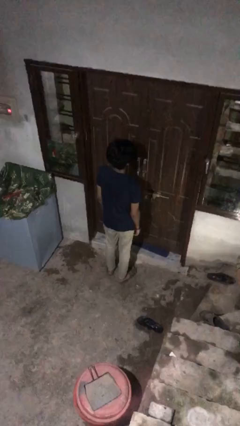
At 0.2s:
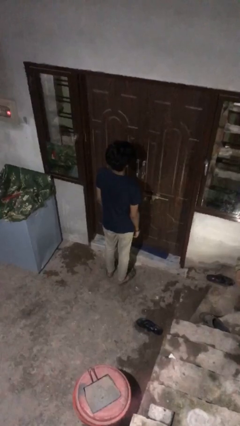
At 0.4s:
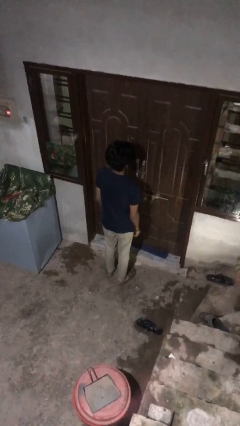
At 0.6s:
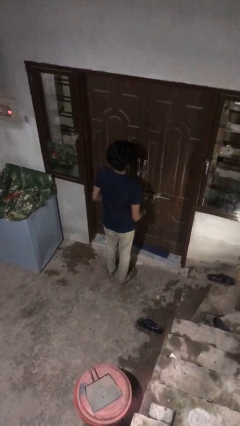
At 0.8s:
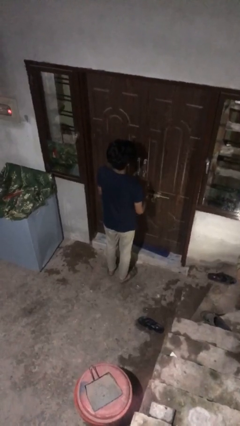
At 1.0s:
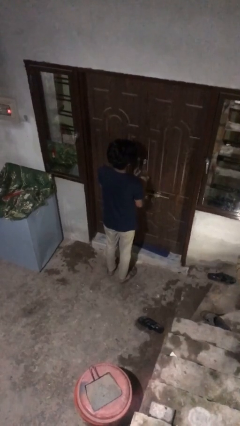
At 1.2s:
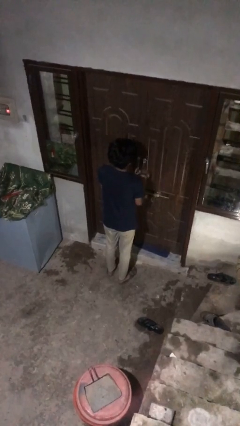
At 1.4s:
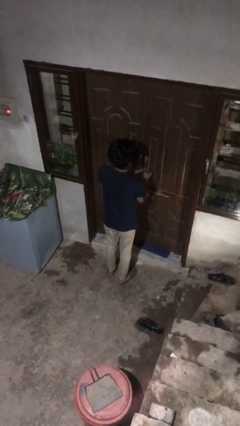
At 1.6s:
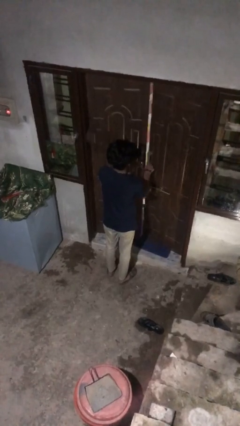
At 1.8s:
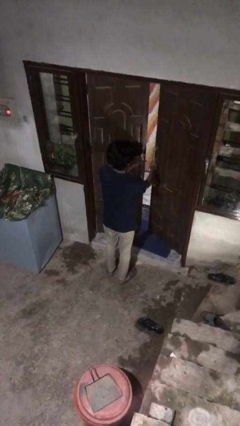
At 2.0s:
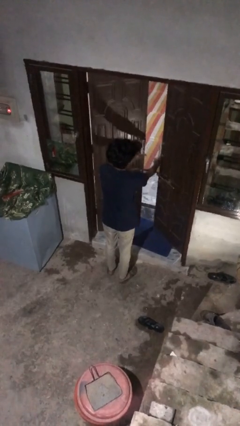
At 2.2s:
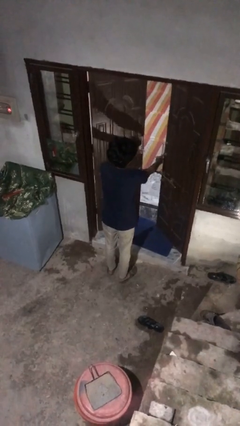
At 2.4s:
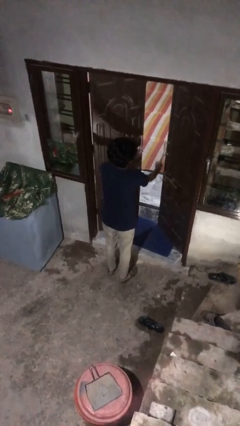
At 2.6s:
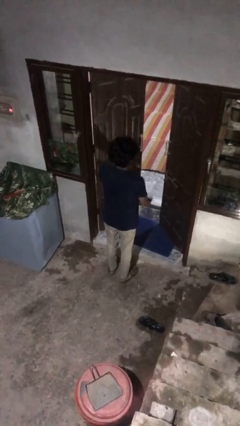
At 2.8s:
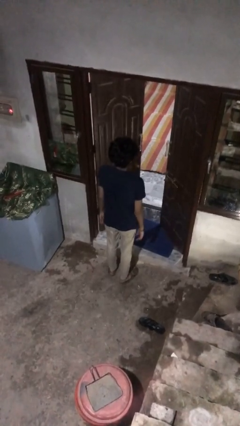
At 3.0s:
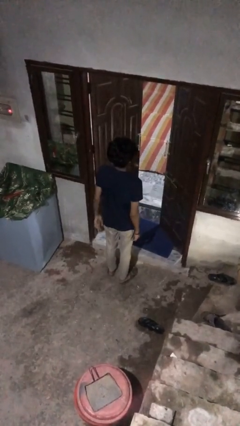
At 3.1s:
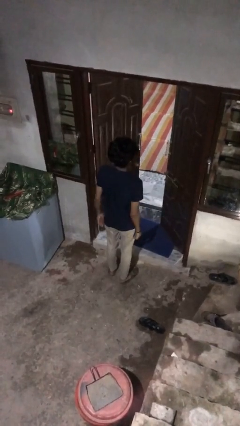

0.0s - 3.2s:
person opens facility door

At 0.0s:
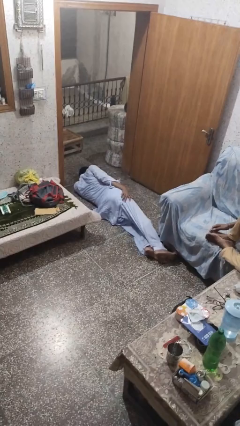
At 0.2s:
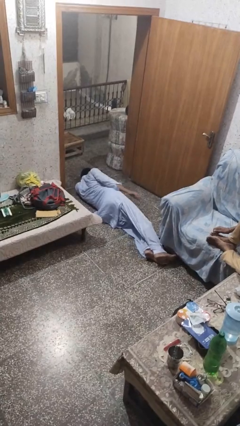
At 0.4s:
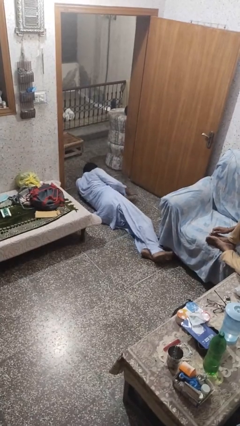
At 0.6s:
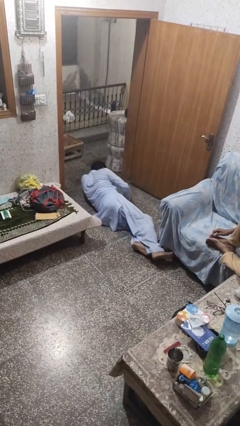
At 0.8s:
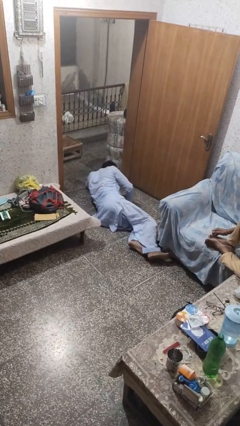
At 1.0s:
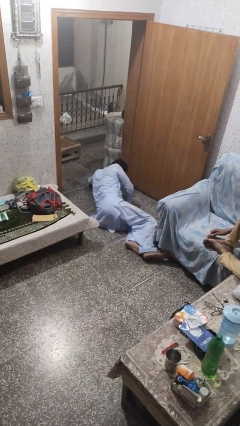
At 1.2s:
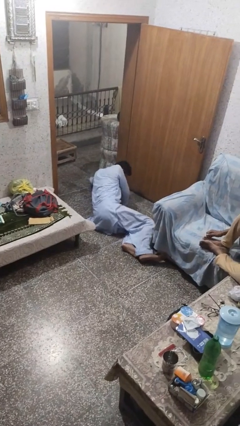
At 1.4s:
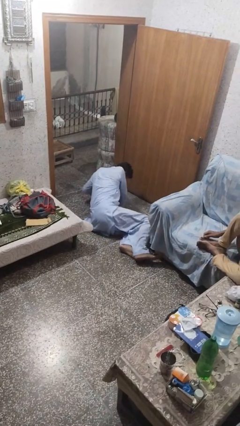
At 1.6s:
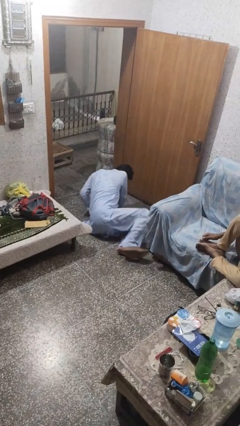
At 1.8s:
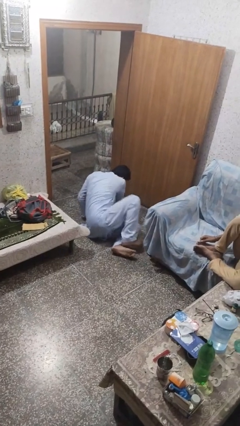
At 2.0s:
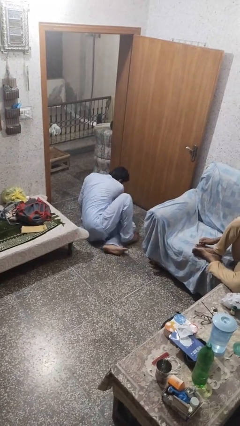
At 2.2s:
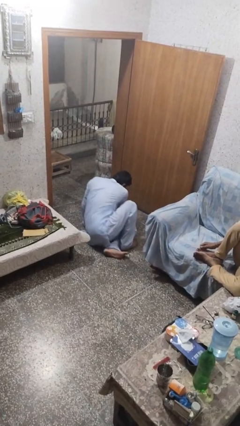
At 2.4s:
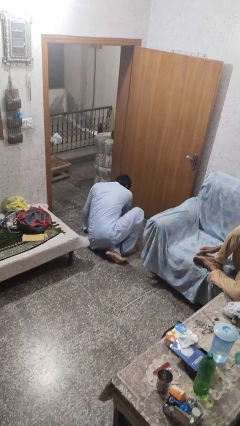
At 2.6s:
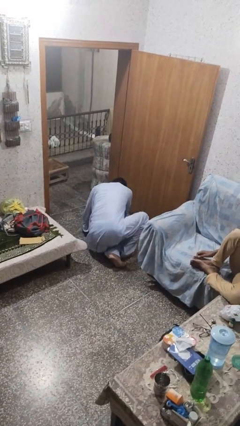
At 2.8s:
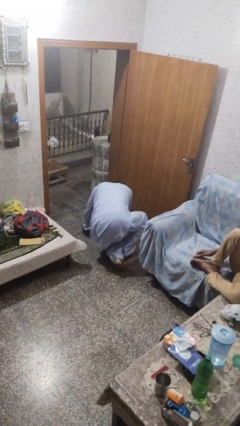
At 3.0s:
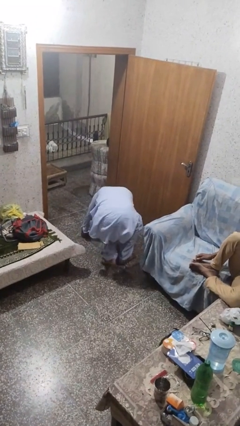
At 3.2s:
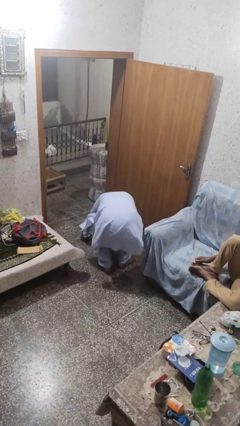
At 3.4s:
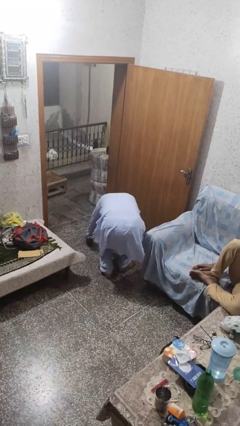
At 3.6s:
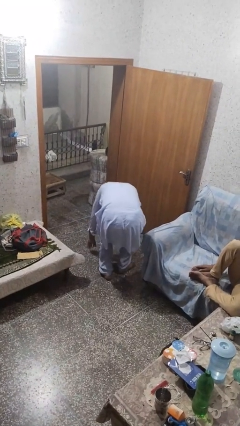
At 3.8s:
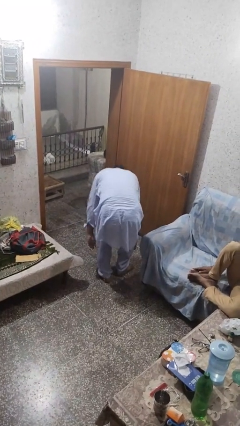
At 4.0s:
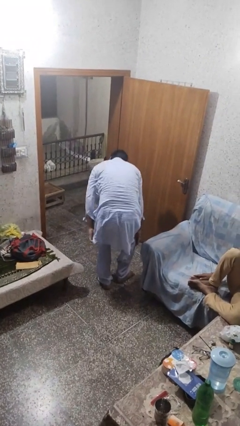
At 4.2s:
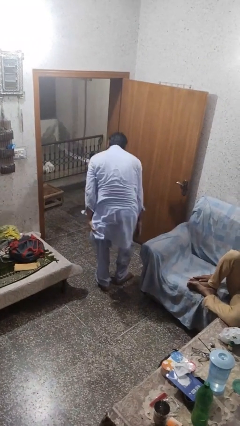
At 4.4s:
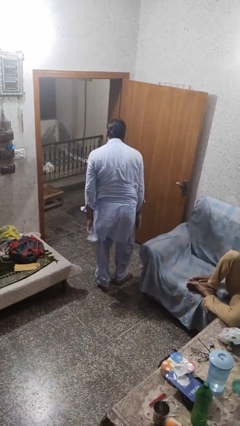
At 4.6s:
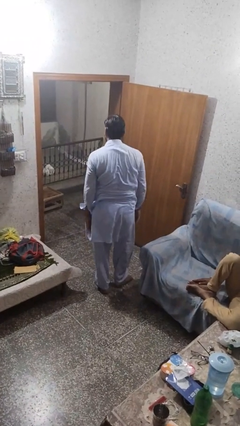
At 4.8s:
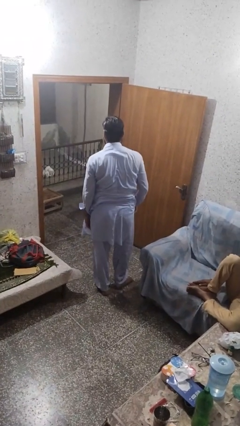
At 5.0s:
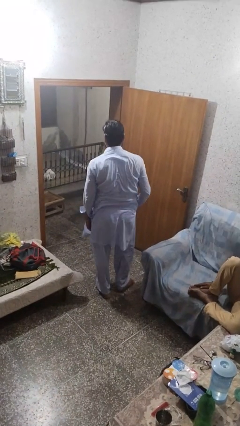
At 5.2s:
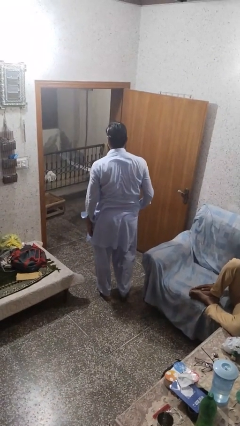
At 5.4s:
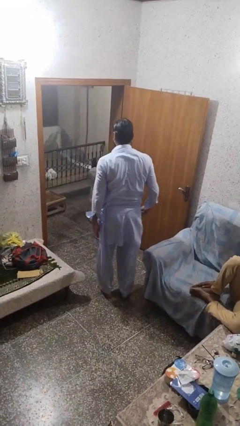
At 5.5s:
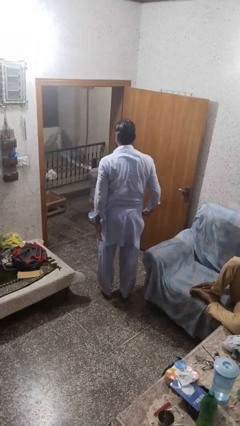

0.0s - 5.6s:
person stands up from floor

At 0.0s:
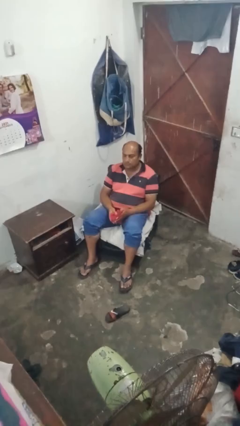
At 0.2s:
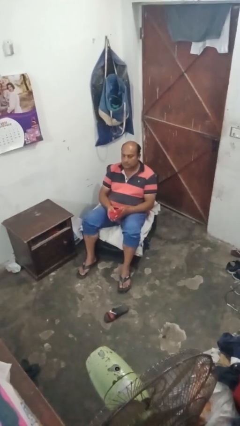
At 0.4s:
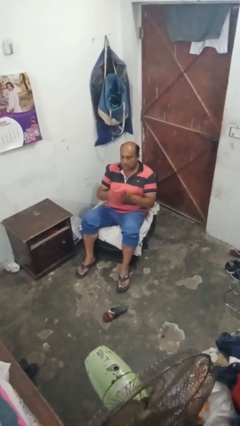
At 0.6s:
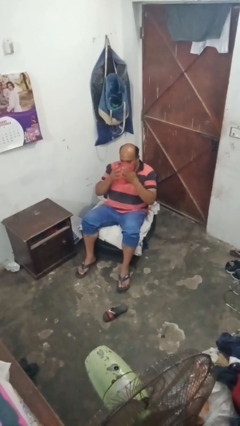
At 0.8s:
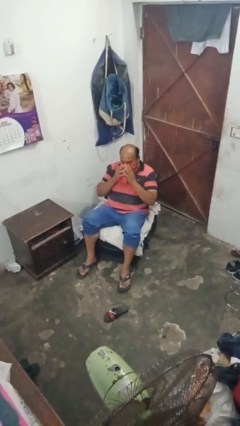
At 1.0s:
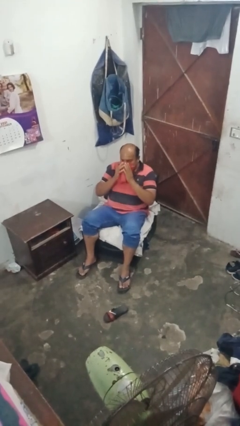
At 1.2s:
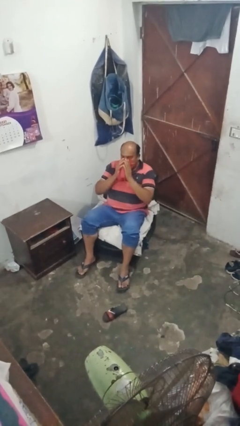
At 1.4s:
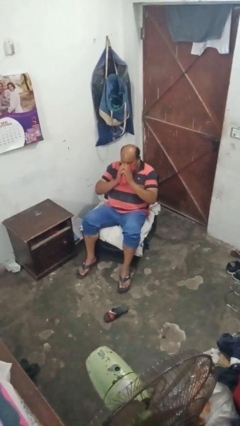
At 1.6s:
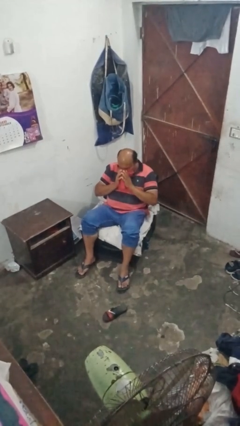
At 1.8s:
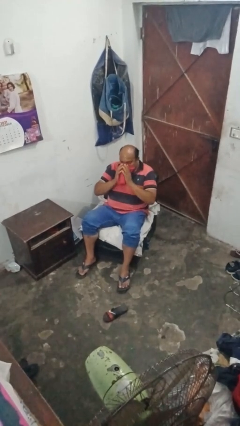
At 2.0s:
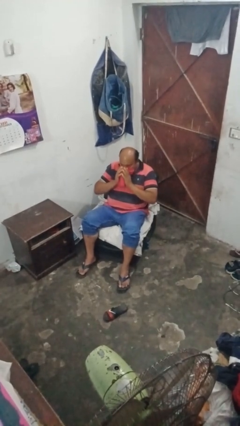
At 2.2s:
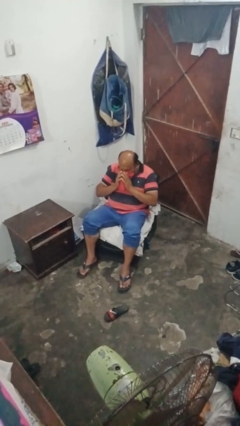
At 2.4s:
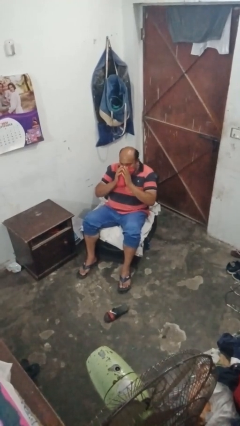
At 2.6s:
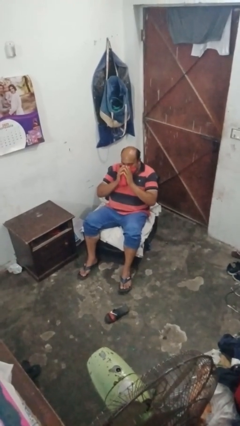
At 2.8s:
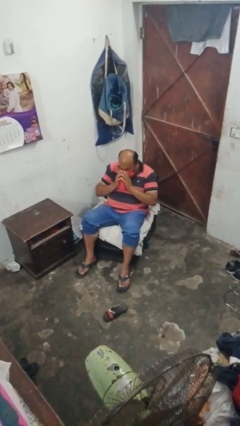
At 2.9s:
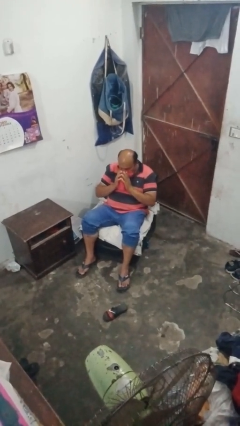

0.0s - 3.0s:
person blows nose

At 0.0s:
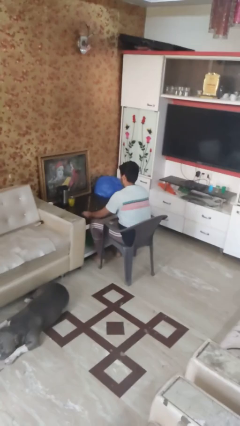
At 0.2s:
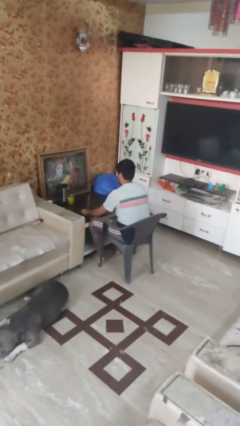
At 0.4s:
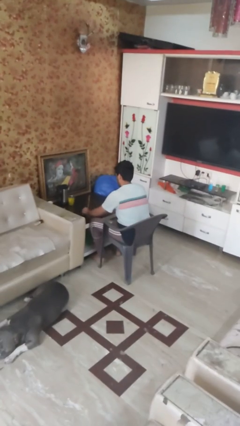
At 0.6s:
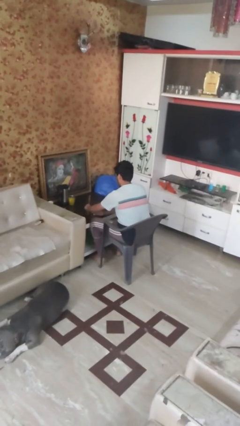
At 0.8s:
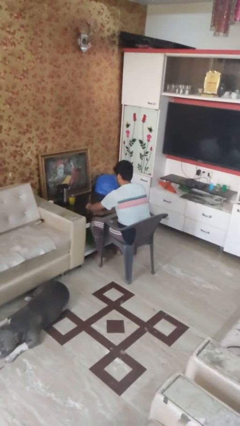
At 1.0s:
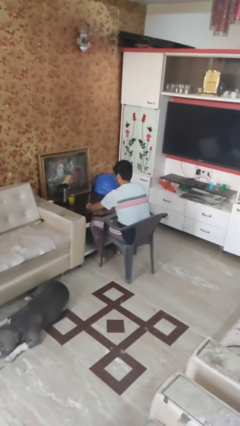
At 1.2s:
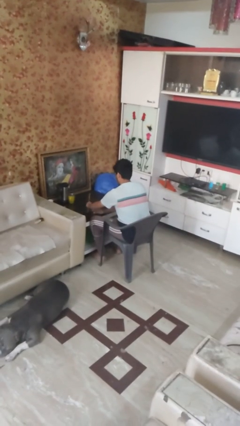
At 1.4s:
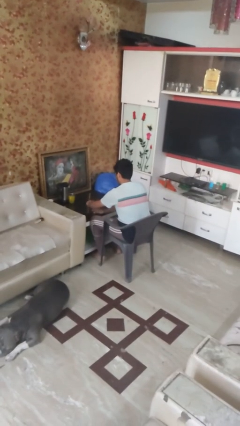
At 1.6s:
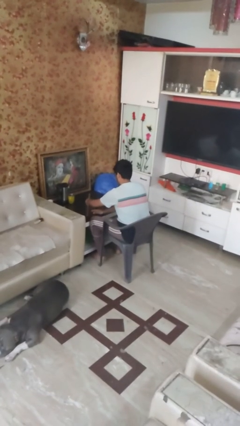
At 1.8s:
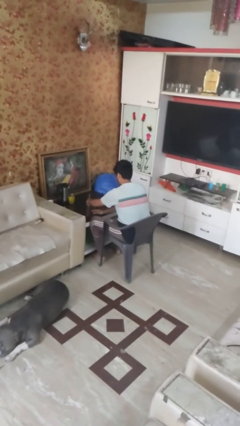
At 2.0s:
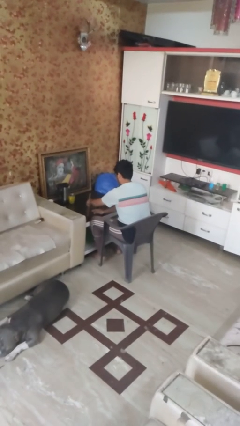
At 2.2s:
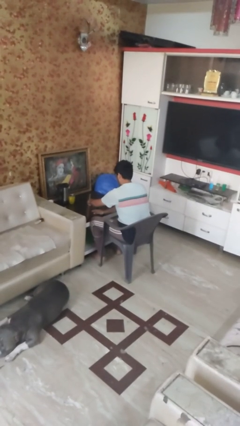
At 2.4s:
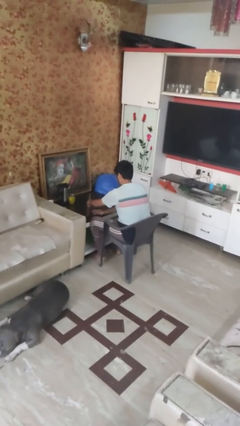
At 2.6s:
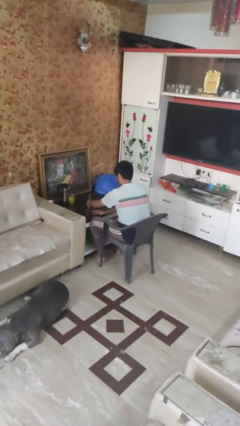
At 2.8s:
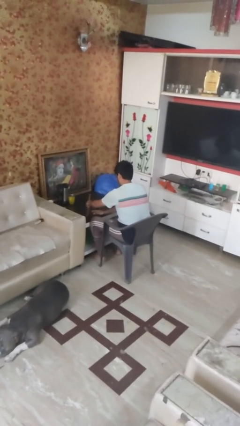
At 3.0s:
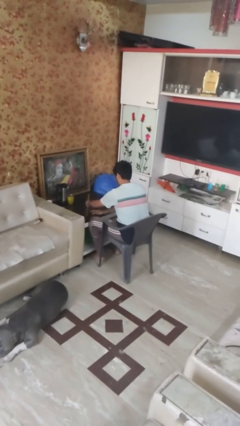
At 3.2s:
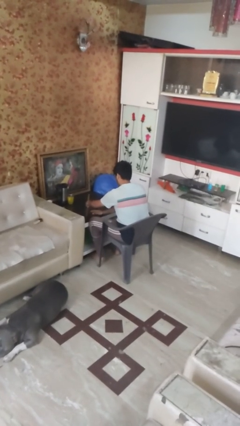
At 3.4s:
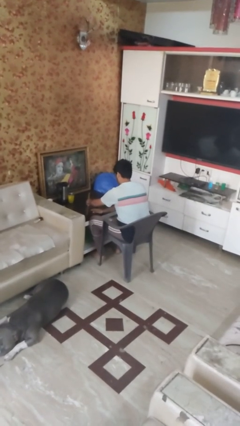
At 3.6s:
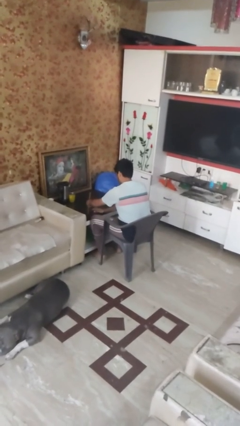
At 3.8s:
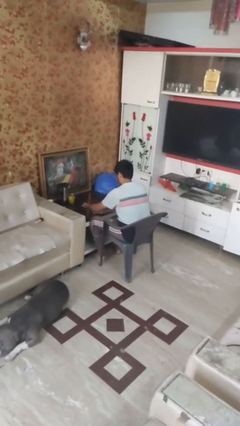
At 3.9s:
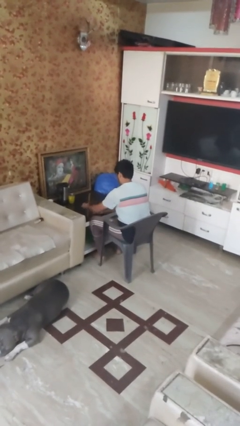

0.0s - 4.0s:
person paints fingernails

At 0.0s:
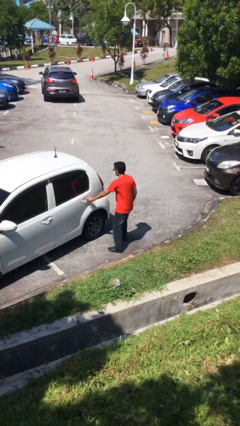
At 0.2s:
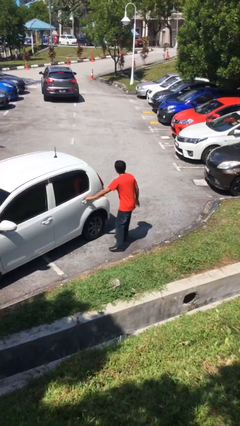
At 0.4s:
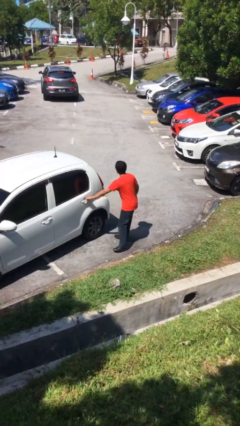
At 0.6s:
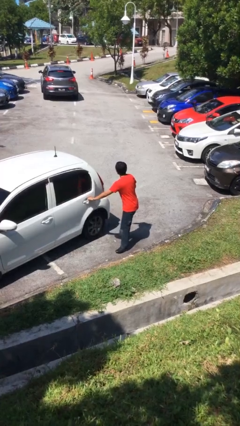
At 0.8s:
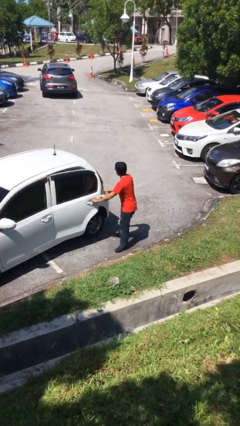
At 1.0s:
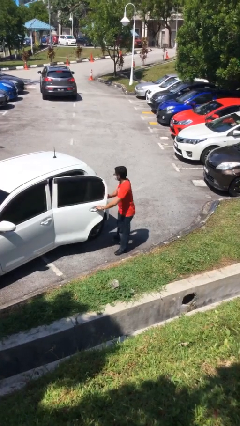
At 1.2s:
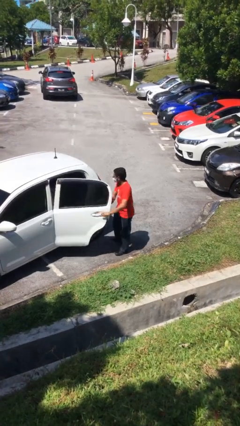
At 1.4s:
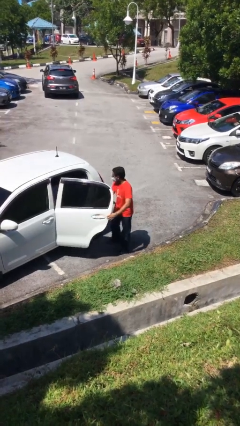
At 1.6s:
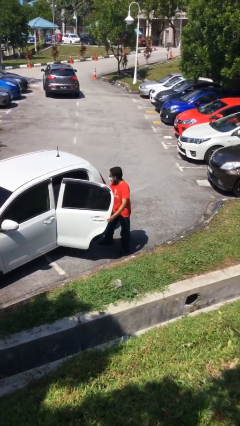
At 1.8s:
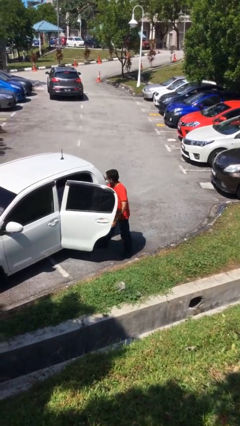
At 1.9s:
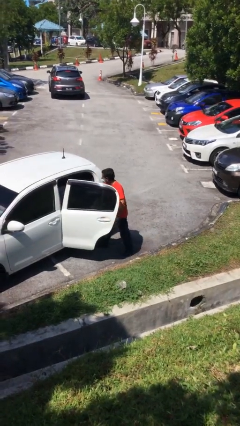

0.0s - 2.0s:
person opens car door
